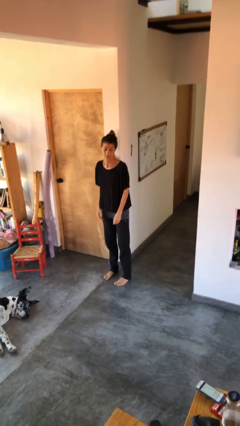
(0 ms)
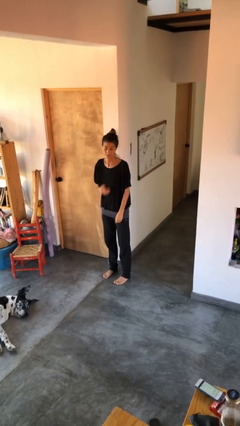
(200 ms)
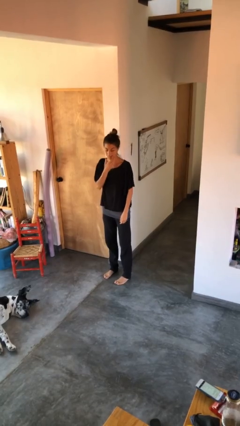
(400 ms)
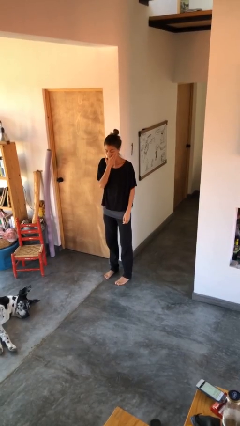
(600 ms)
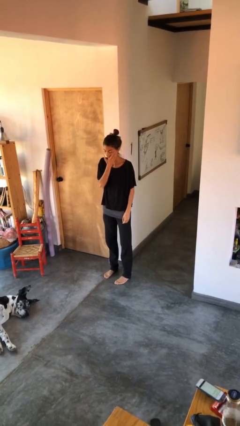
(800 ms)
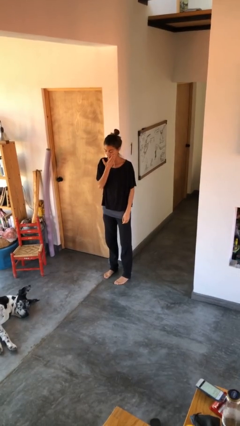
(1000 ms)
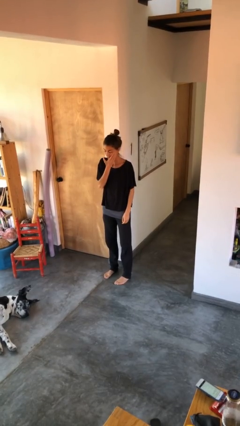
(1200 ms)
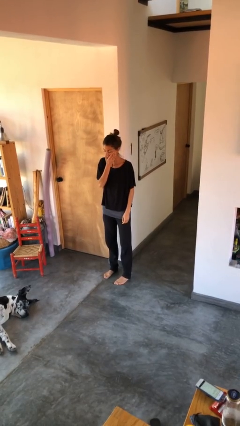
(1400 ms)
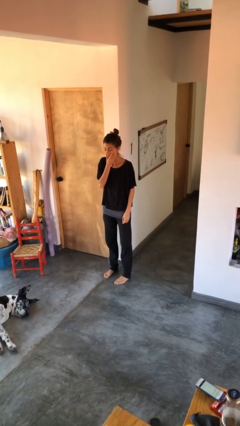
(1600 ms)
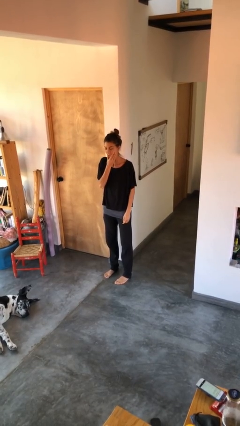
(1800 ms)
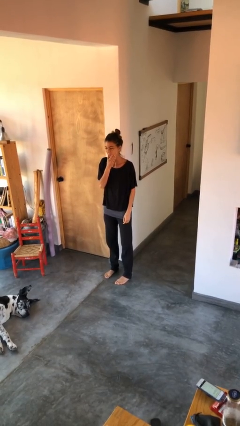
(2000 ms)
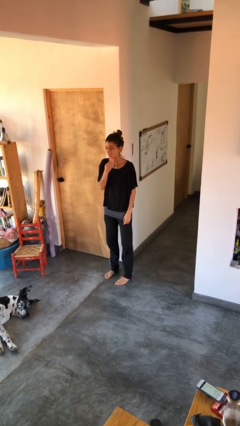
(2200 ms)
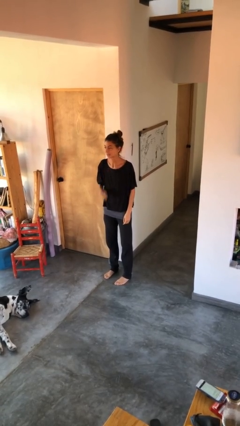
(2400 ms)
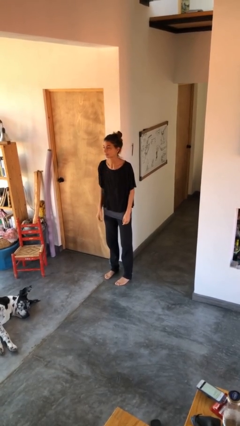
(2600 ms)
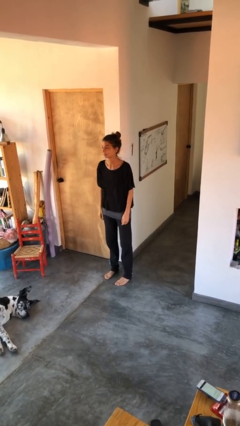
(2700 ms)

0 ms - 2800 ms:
person scratches face

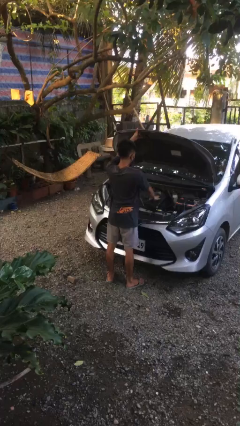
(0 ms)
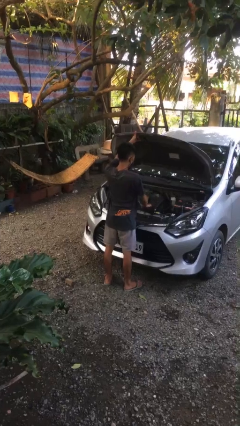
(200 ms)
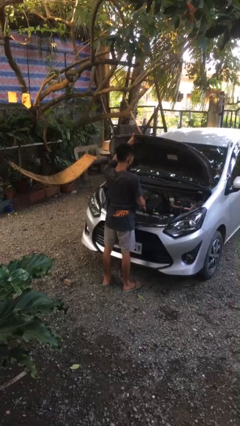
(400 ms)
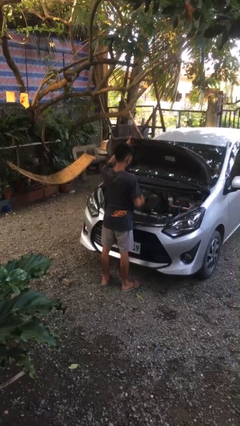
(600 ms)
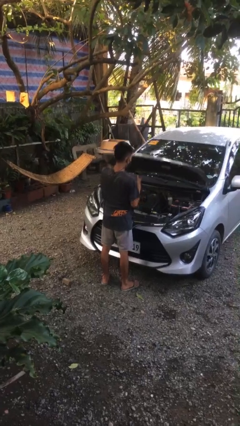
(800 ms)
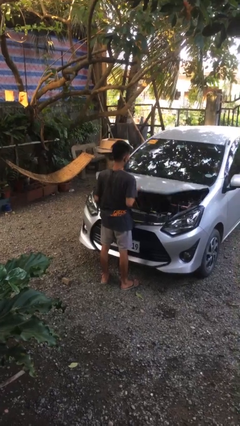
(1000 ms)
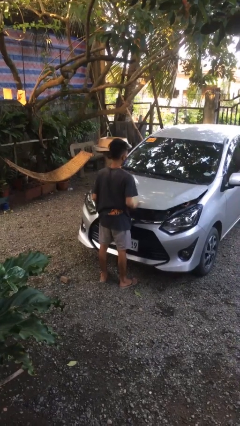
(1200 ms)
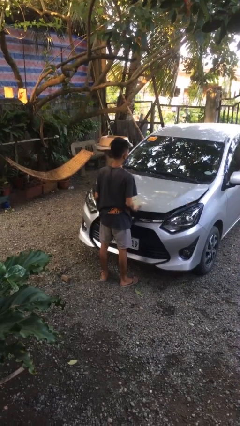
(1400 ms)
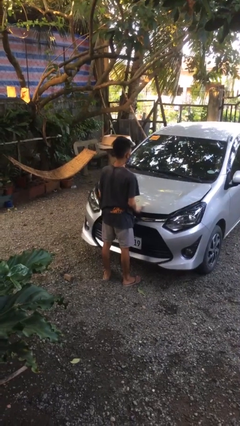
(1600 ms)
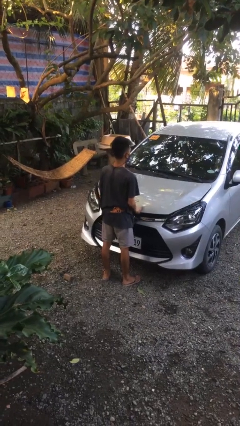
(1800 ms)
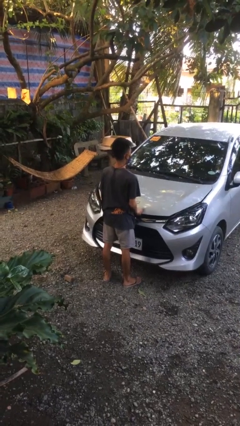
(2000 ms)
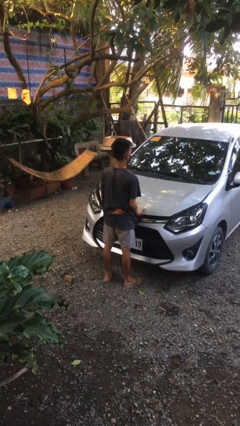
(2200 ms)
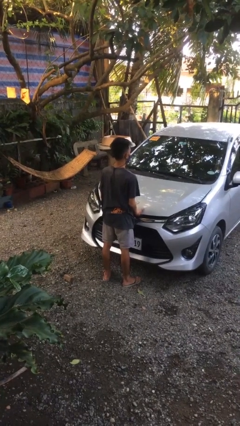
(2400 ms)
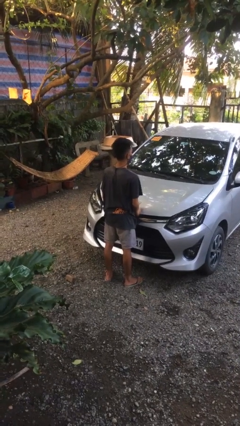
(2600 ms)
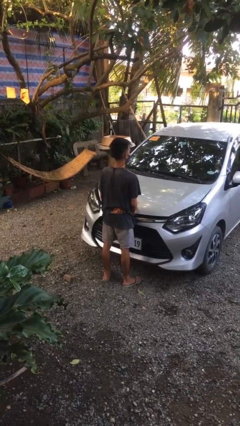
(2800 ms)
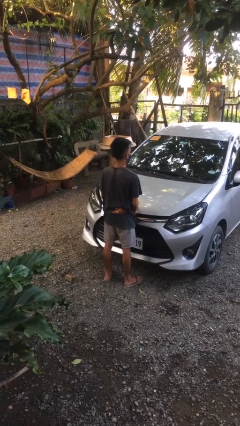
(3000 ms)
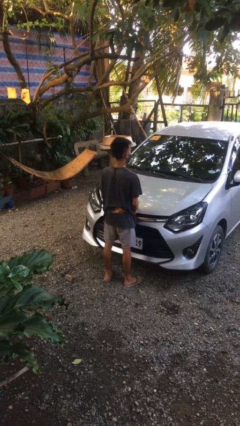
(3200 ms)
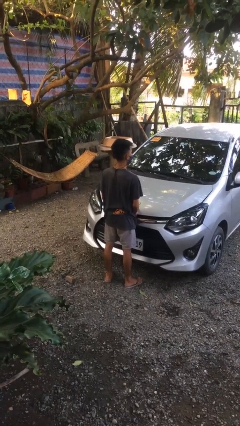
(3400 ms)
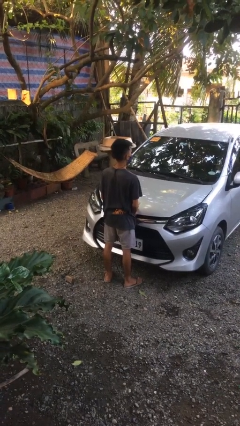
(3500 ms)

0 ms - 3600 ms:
person closes car hood

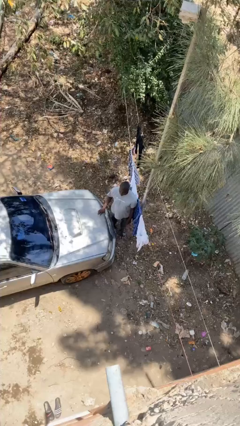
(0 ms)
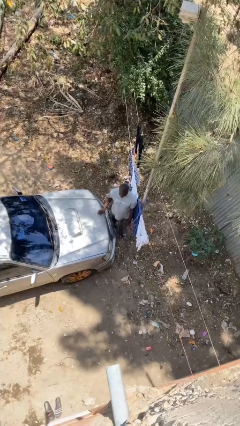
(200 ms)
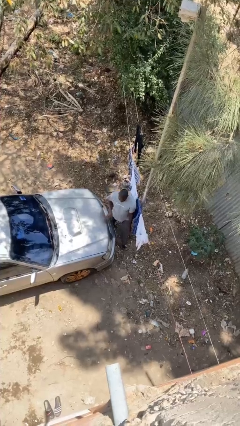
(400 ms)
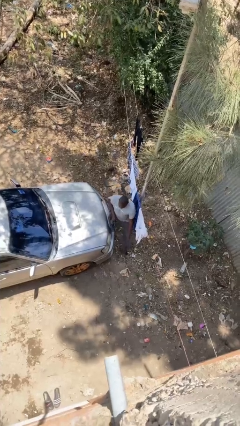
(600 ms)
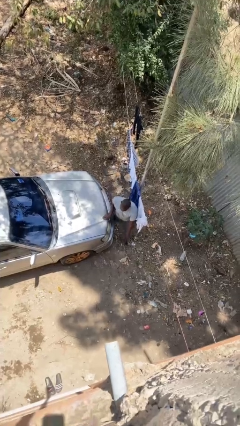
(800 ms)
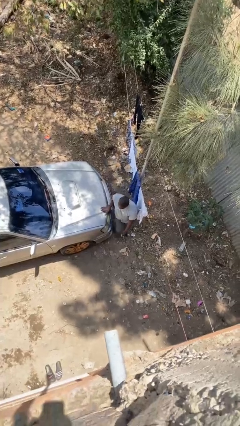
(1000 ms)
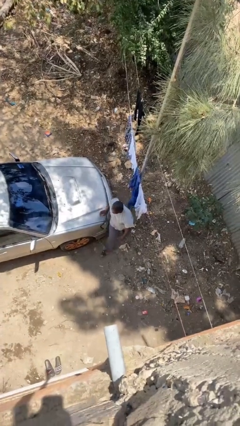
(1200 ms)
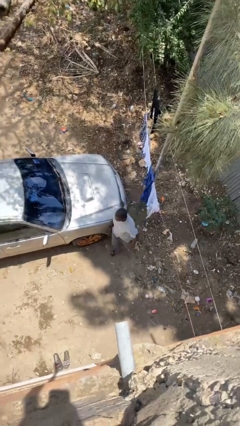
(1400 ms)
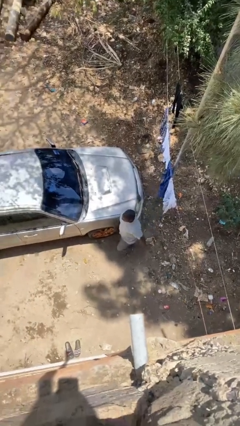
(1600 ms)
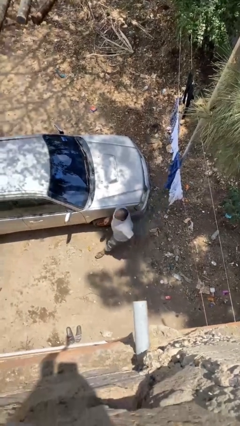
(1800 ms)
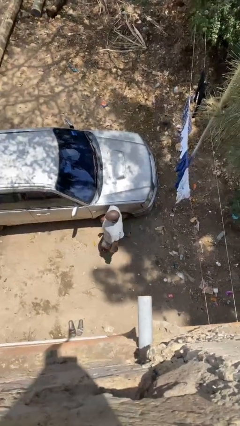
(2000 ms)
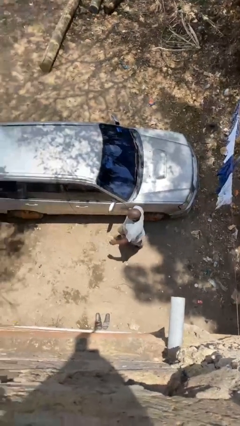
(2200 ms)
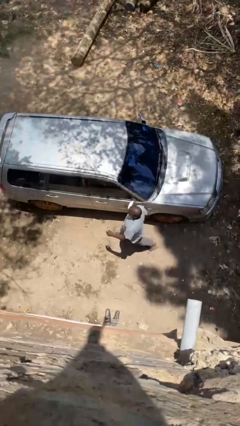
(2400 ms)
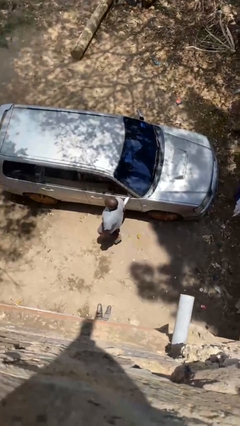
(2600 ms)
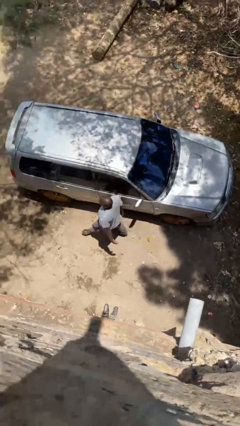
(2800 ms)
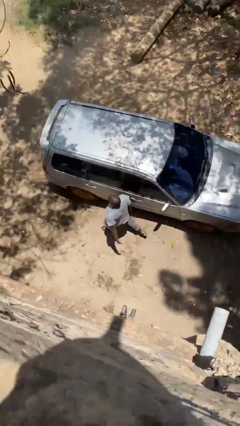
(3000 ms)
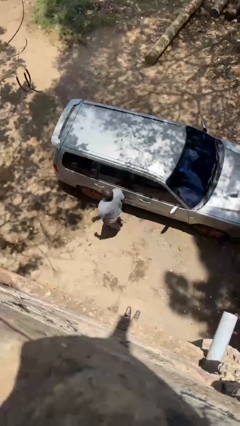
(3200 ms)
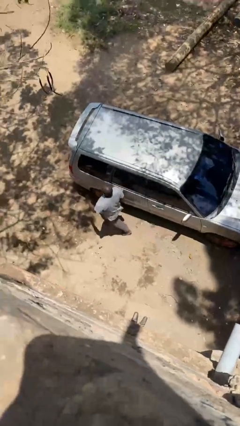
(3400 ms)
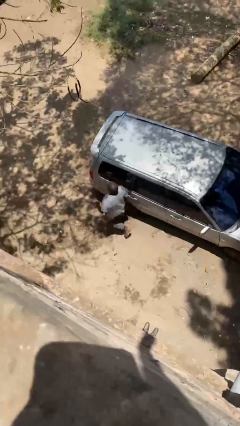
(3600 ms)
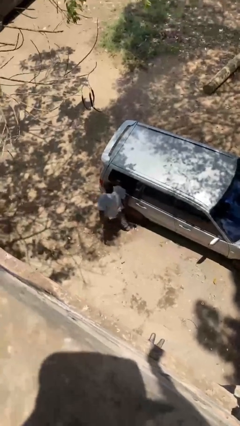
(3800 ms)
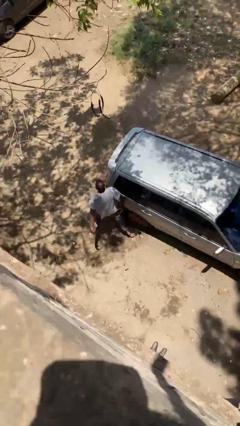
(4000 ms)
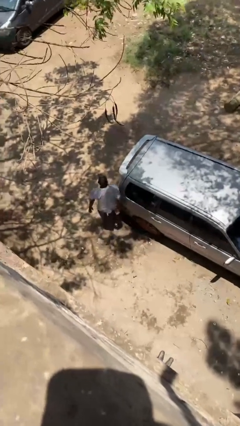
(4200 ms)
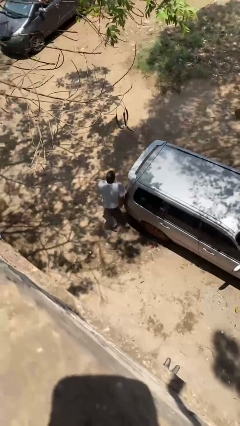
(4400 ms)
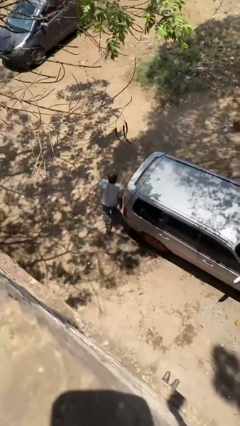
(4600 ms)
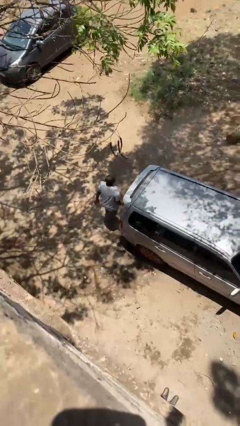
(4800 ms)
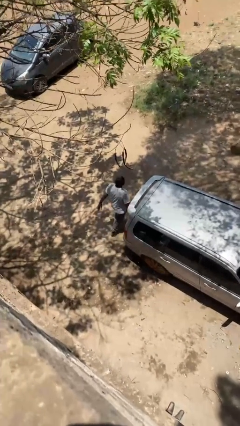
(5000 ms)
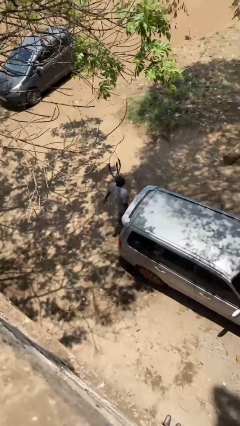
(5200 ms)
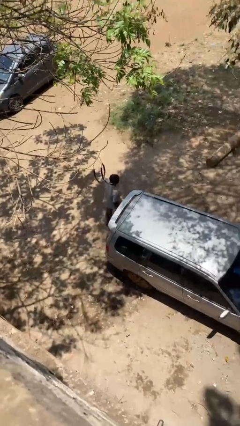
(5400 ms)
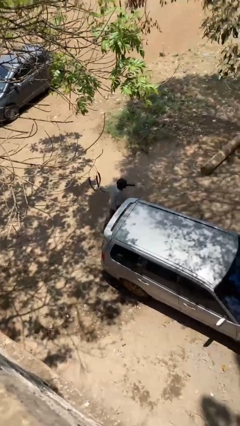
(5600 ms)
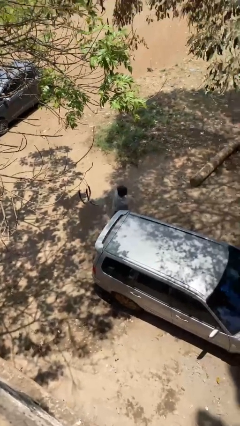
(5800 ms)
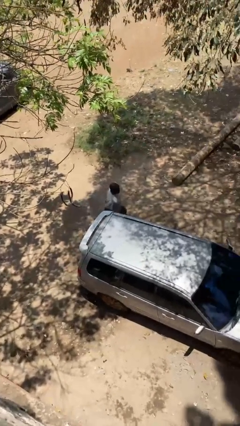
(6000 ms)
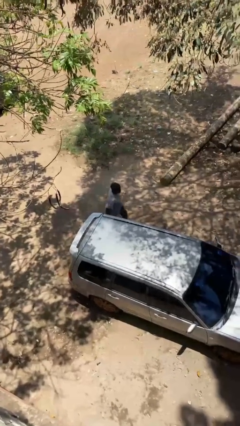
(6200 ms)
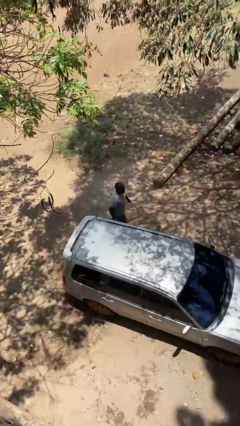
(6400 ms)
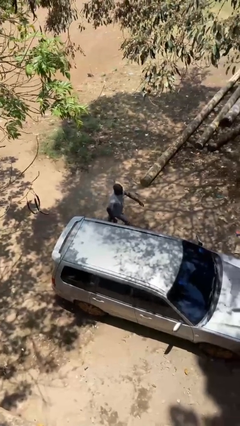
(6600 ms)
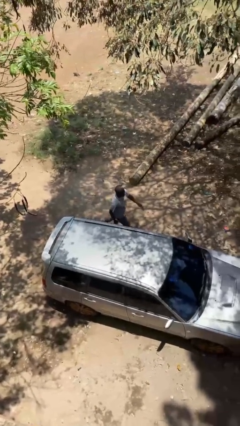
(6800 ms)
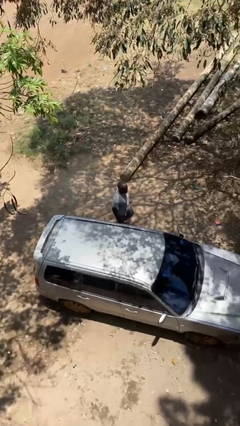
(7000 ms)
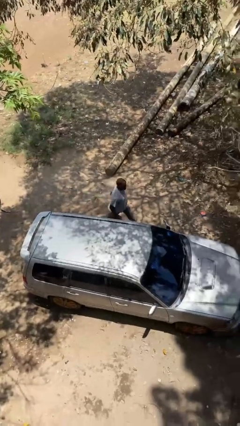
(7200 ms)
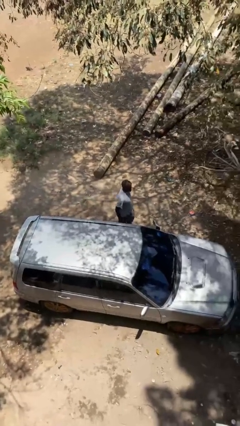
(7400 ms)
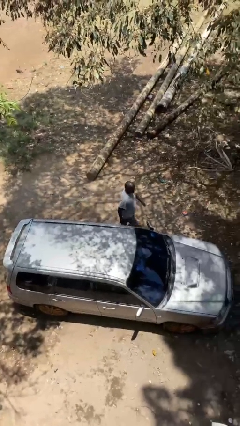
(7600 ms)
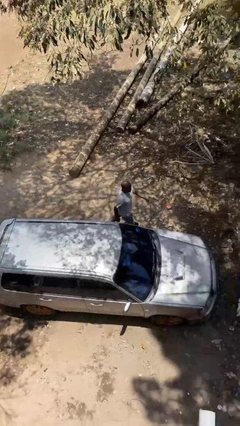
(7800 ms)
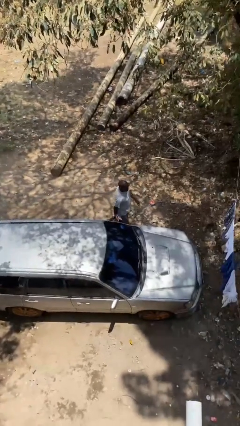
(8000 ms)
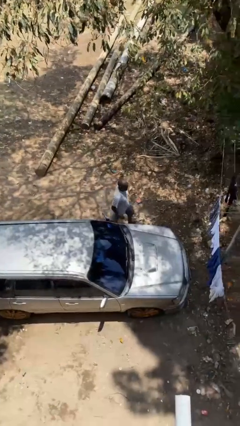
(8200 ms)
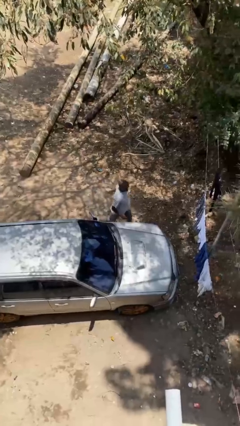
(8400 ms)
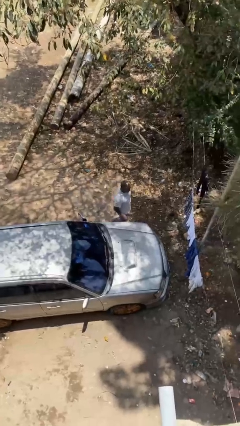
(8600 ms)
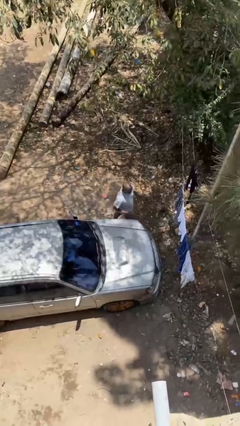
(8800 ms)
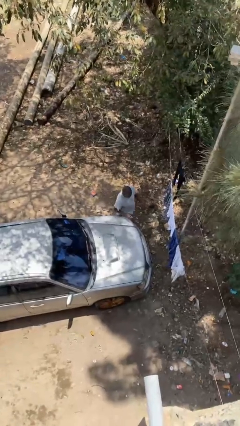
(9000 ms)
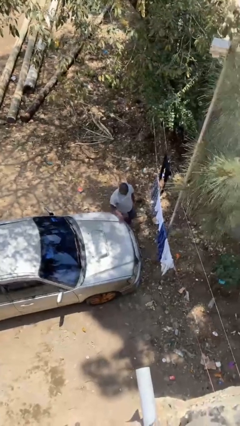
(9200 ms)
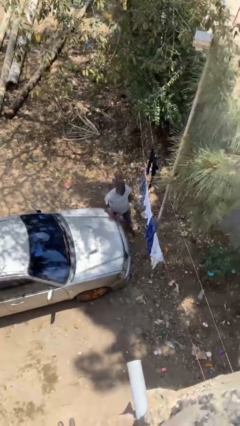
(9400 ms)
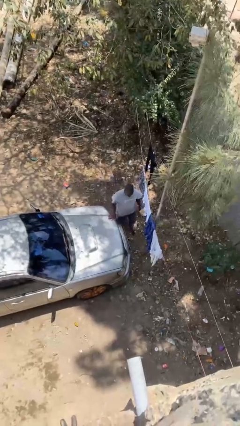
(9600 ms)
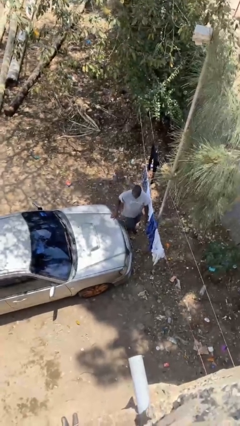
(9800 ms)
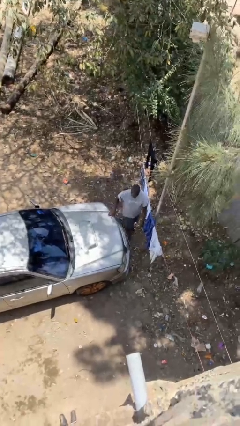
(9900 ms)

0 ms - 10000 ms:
person walks around car

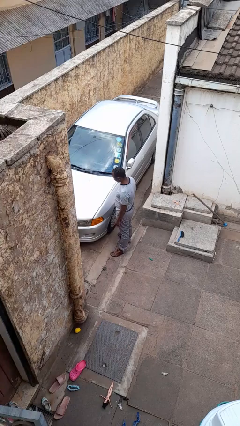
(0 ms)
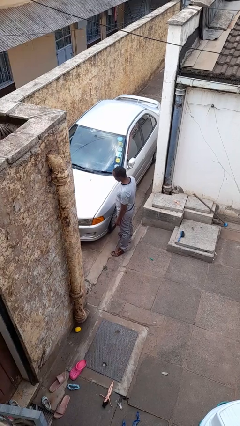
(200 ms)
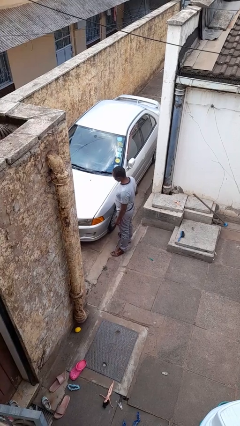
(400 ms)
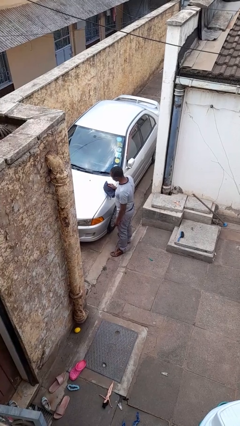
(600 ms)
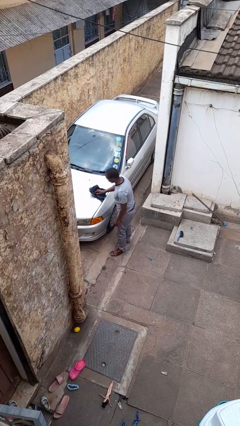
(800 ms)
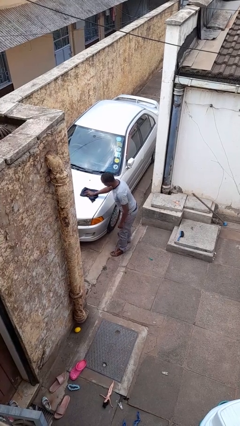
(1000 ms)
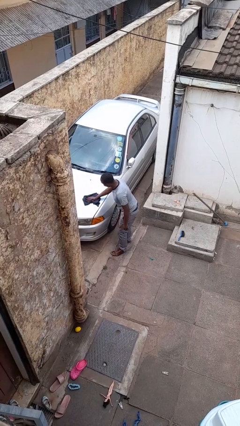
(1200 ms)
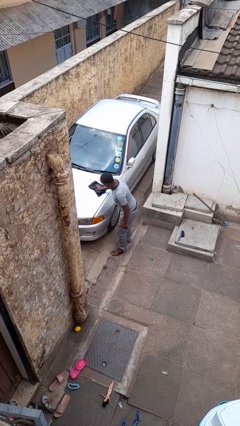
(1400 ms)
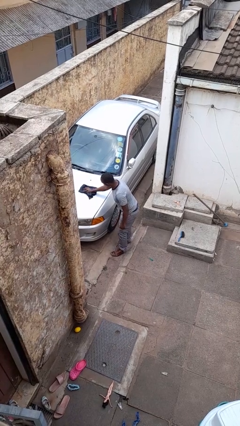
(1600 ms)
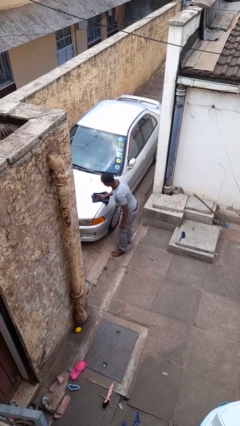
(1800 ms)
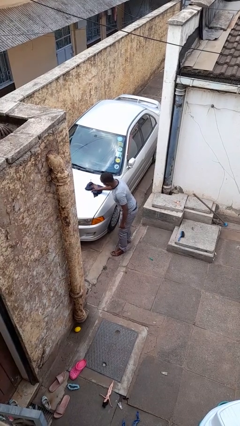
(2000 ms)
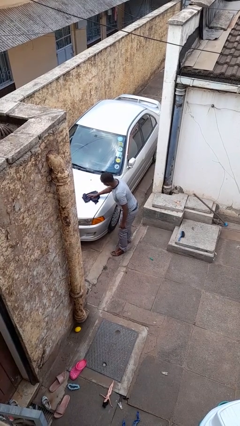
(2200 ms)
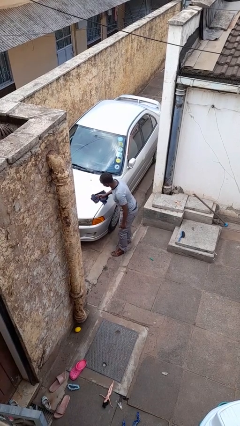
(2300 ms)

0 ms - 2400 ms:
person polishes car with rag
